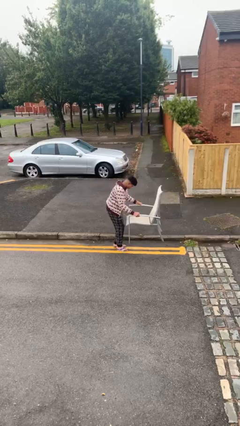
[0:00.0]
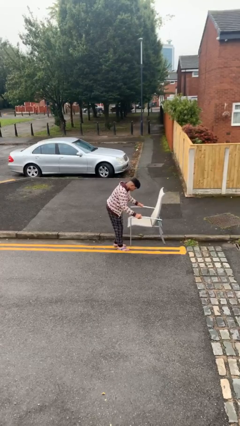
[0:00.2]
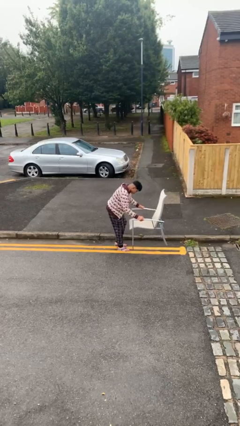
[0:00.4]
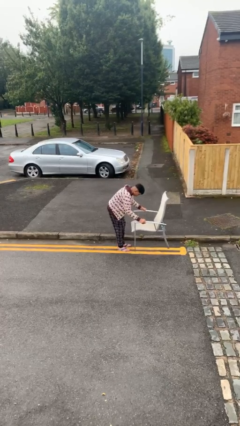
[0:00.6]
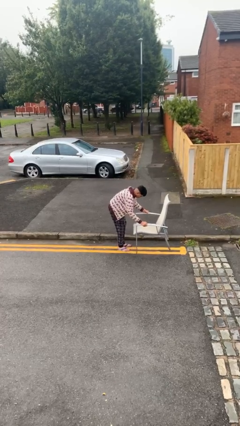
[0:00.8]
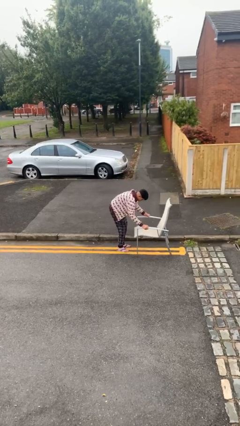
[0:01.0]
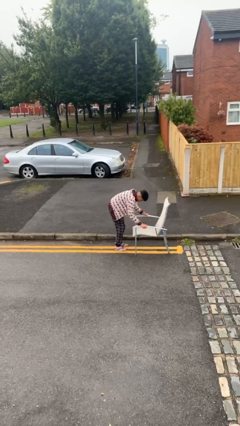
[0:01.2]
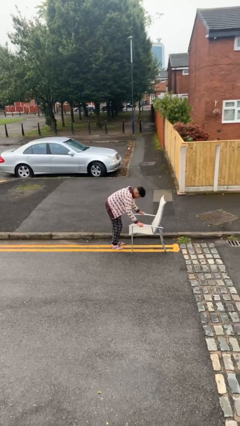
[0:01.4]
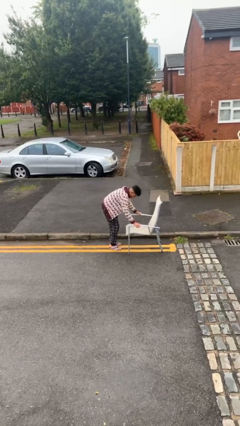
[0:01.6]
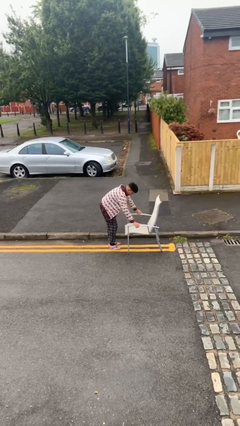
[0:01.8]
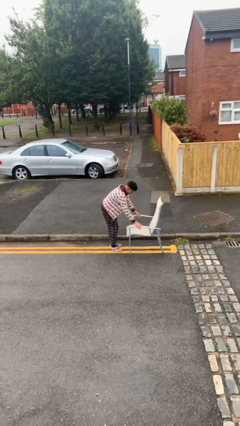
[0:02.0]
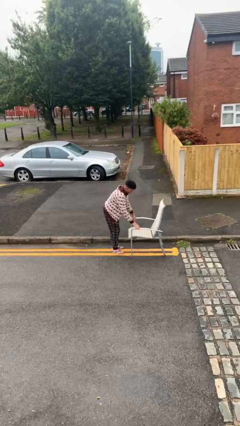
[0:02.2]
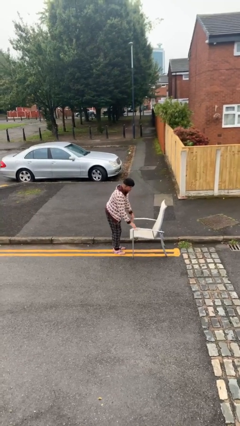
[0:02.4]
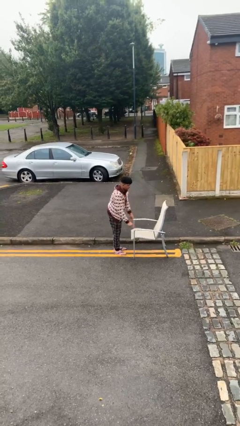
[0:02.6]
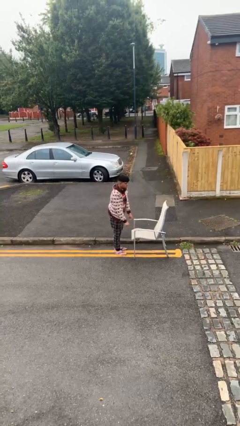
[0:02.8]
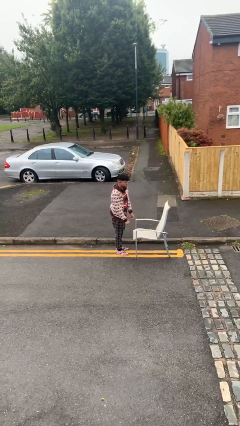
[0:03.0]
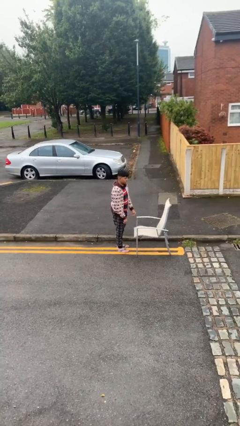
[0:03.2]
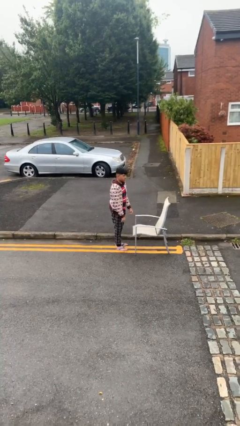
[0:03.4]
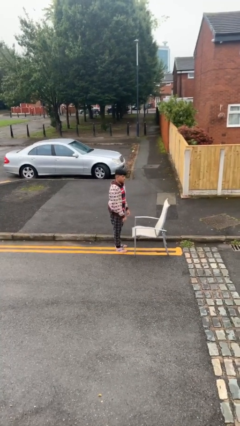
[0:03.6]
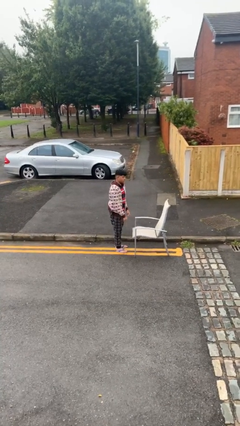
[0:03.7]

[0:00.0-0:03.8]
person puts down object on floor

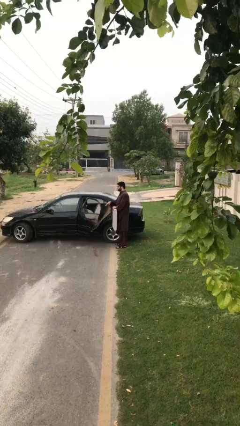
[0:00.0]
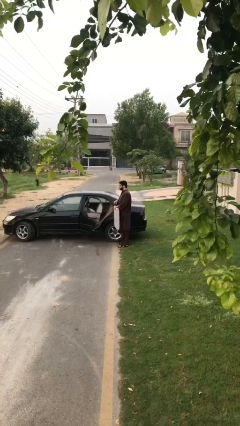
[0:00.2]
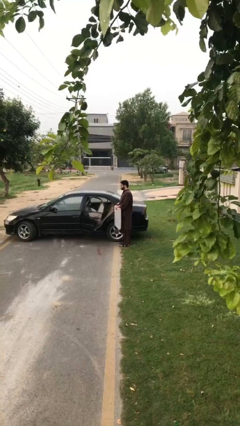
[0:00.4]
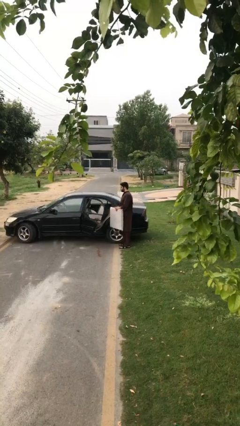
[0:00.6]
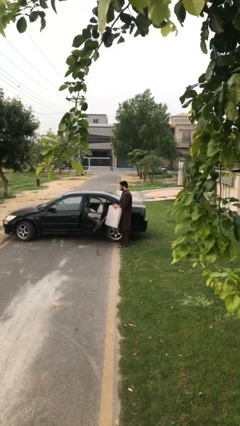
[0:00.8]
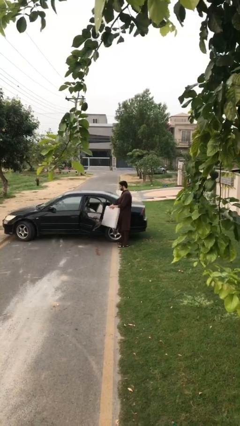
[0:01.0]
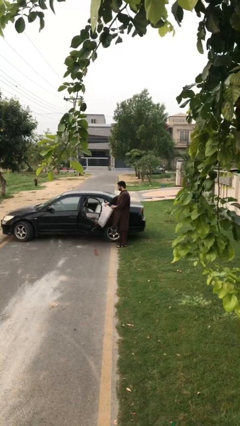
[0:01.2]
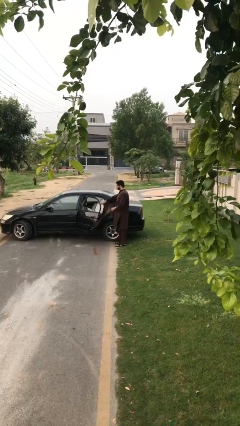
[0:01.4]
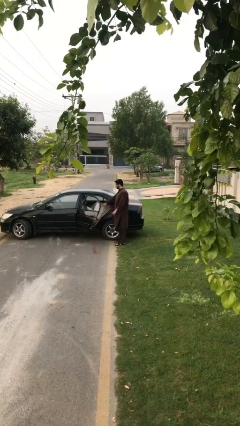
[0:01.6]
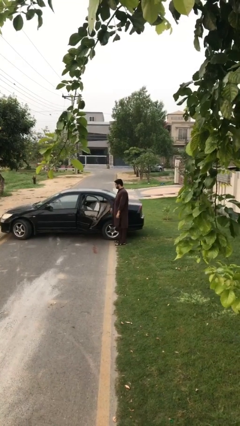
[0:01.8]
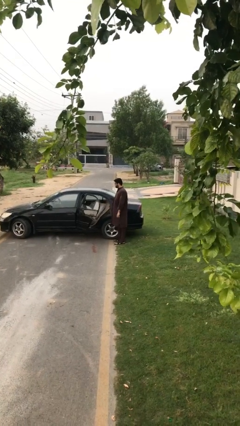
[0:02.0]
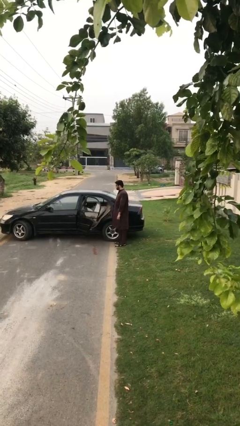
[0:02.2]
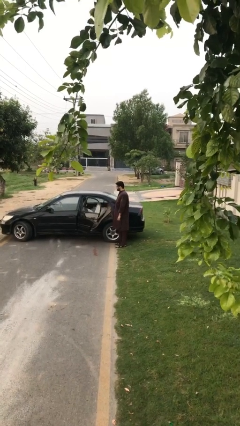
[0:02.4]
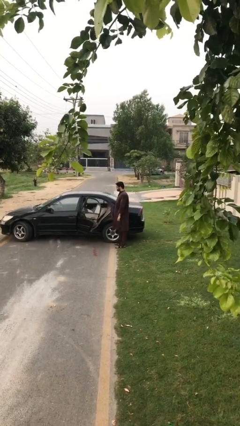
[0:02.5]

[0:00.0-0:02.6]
person loads car

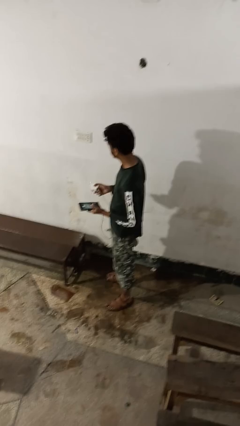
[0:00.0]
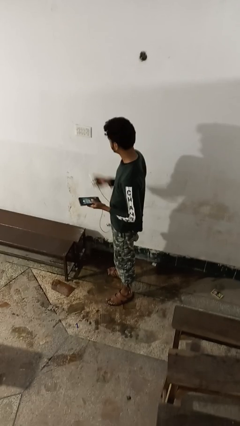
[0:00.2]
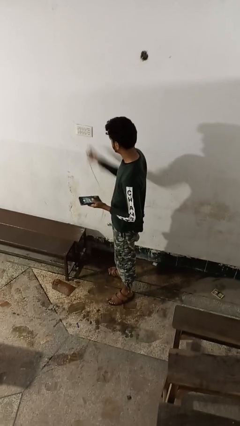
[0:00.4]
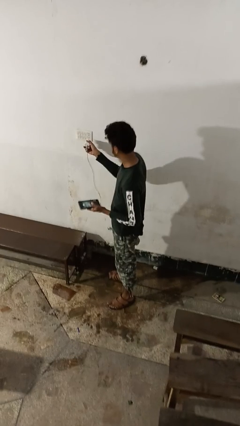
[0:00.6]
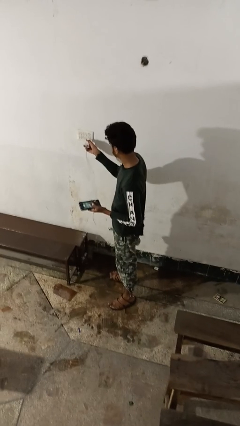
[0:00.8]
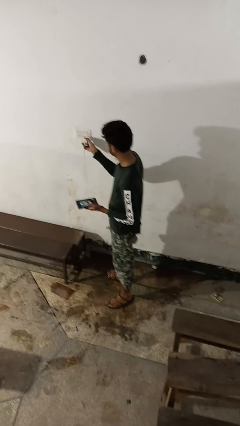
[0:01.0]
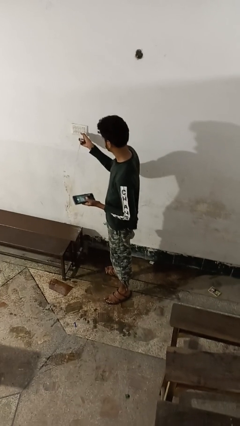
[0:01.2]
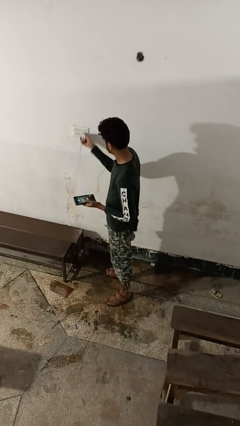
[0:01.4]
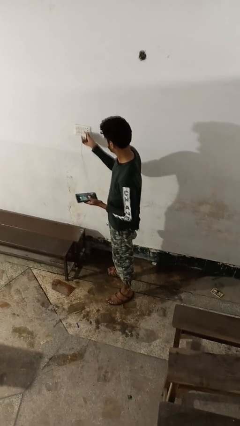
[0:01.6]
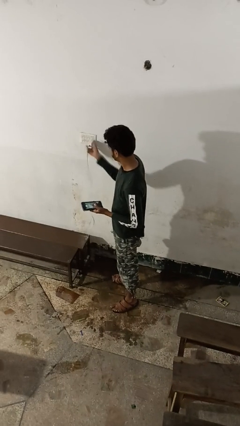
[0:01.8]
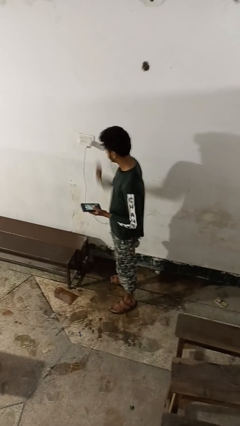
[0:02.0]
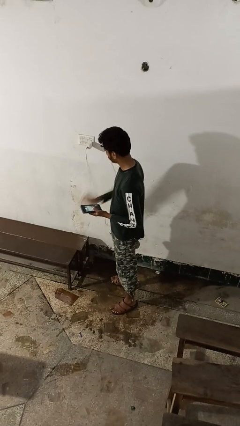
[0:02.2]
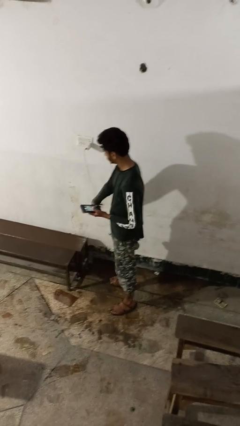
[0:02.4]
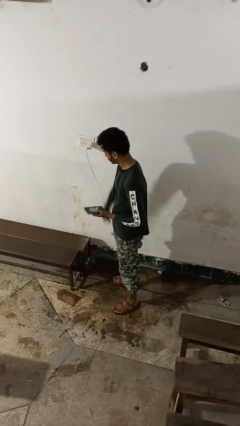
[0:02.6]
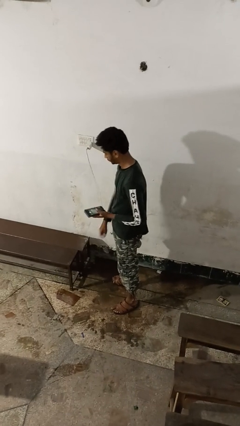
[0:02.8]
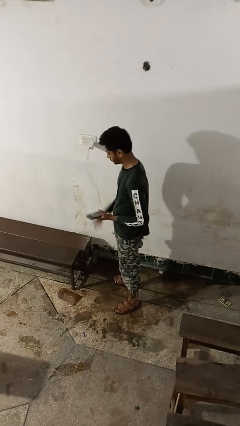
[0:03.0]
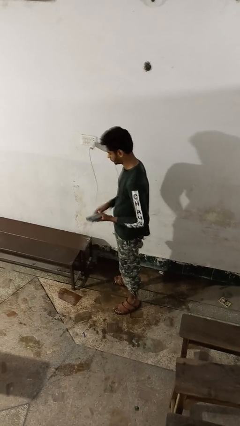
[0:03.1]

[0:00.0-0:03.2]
person plugs into electrical socket

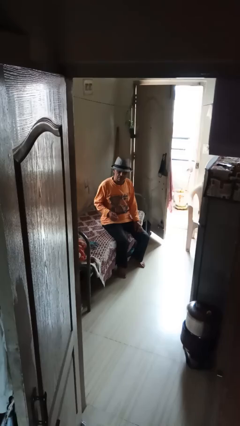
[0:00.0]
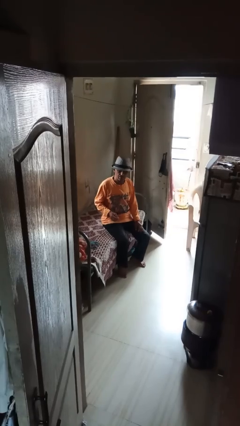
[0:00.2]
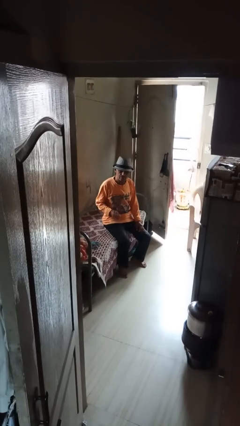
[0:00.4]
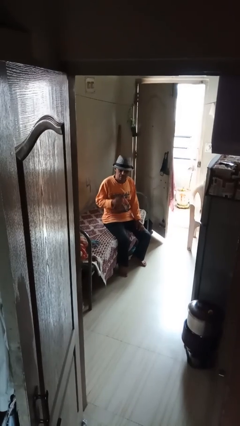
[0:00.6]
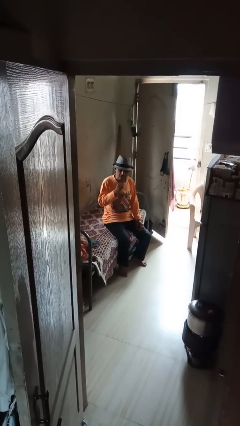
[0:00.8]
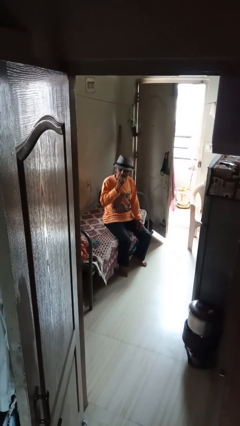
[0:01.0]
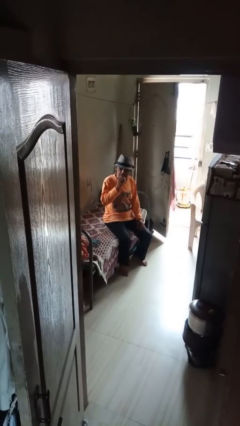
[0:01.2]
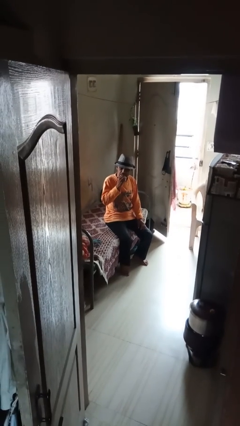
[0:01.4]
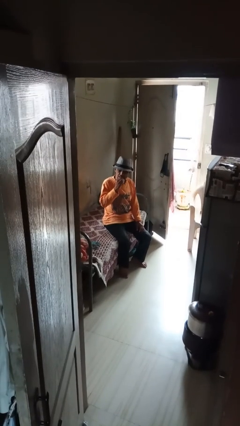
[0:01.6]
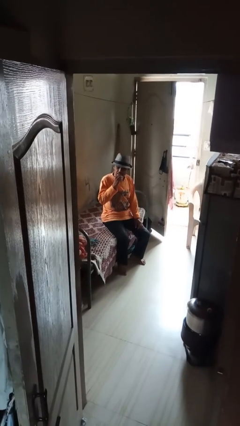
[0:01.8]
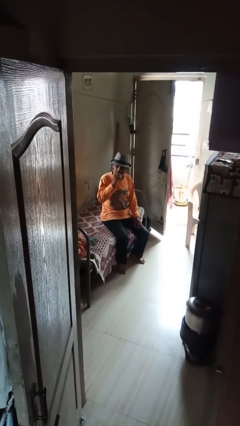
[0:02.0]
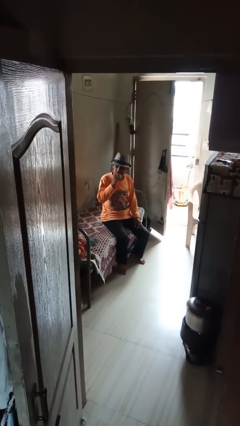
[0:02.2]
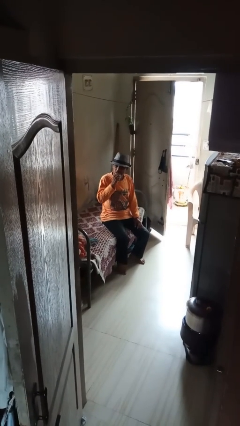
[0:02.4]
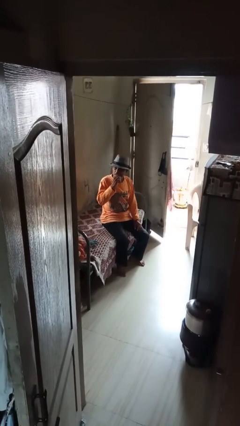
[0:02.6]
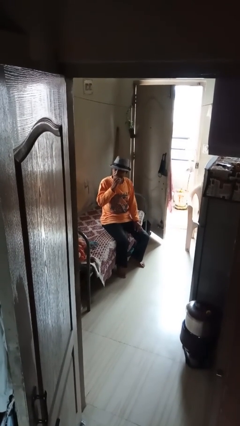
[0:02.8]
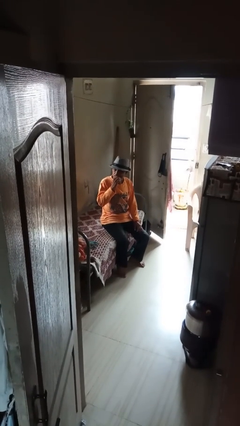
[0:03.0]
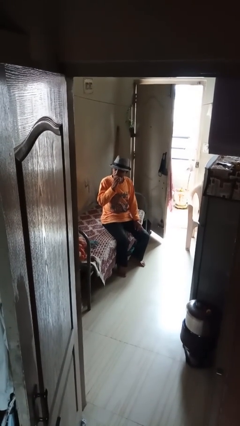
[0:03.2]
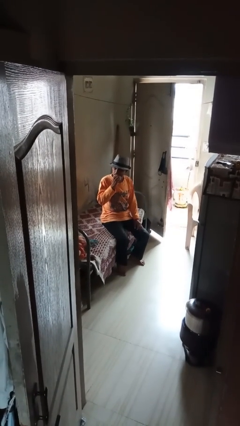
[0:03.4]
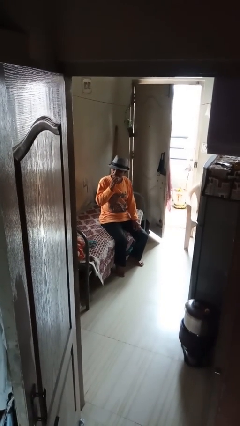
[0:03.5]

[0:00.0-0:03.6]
person flosses

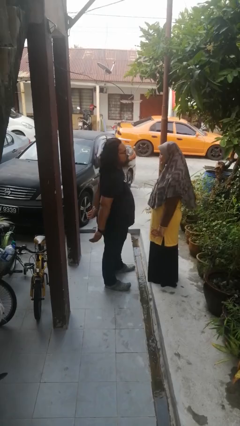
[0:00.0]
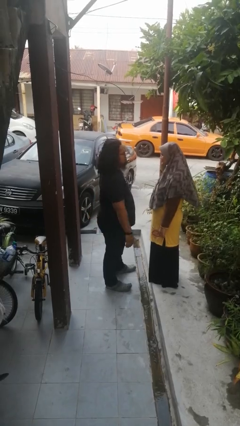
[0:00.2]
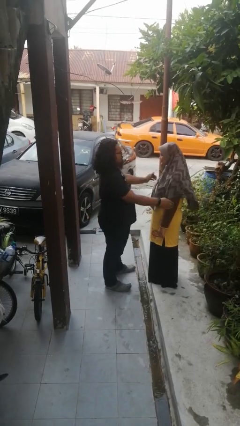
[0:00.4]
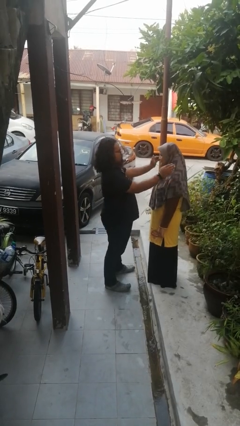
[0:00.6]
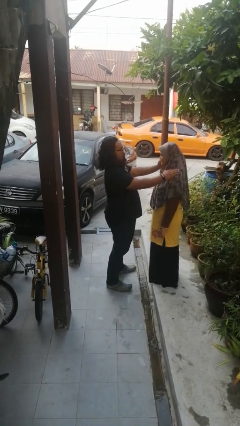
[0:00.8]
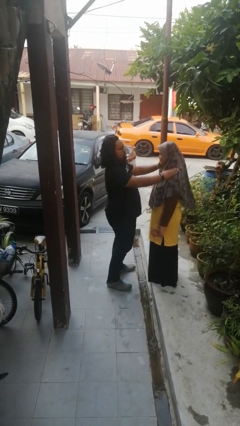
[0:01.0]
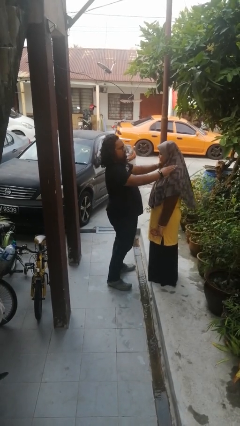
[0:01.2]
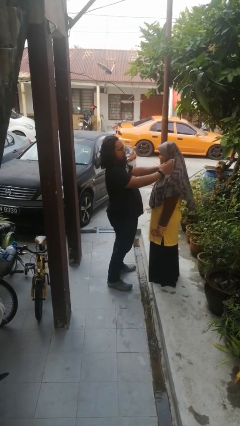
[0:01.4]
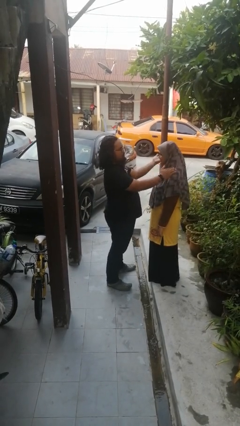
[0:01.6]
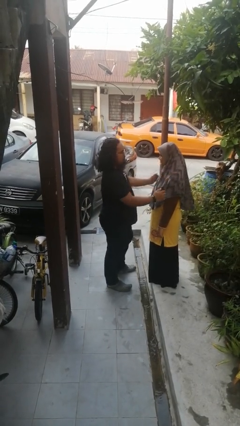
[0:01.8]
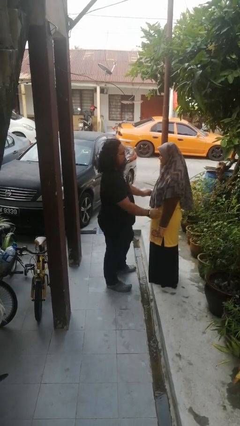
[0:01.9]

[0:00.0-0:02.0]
person pounds shoulders of person

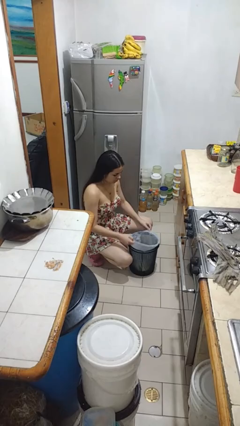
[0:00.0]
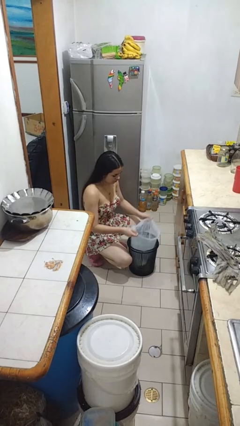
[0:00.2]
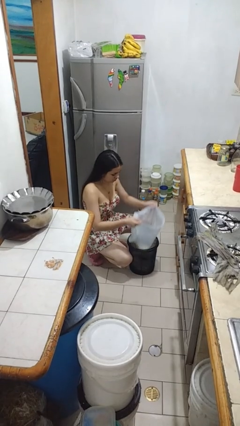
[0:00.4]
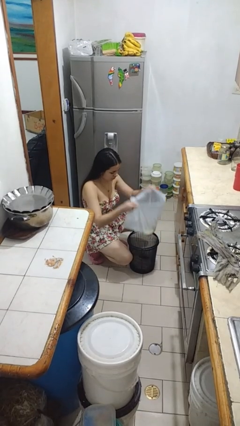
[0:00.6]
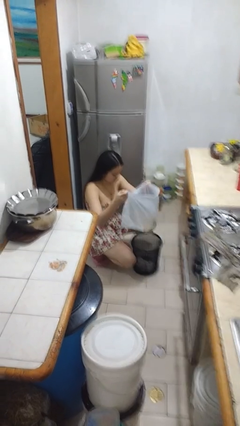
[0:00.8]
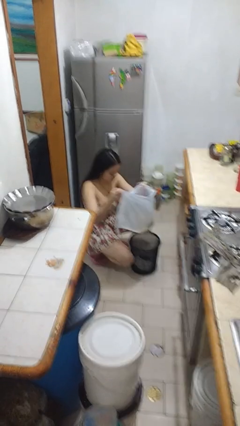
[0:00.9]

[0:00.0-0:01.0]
person removes trashbag from trashcan

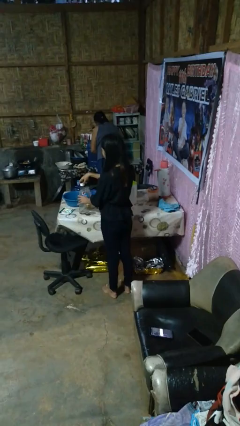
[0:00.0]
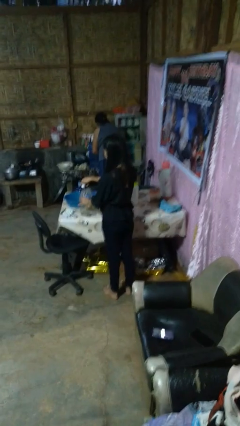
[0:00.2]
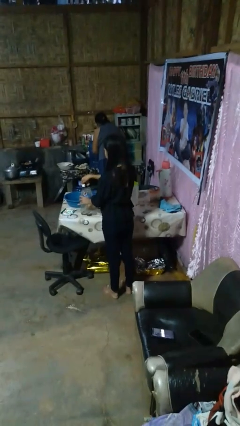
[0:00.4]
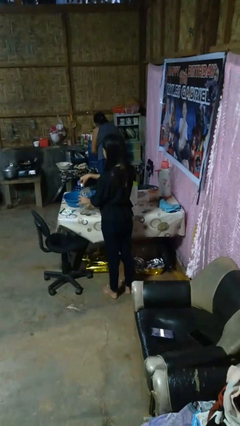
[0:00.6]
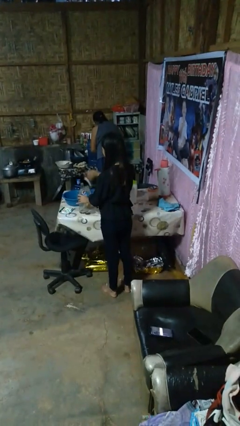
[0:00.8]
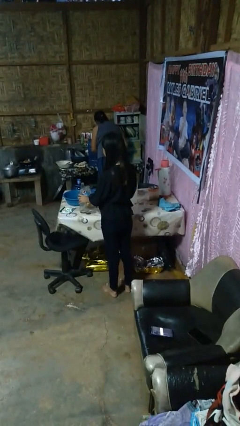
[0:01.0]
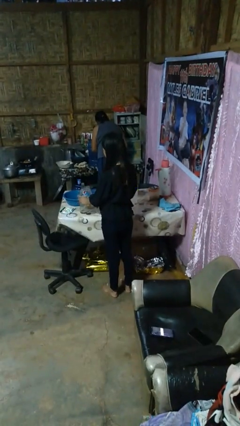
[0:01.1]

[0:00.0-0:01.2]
person unscrews lid from bottle
